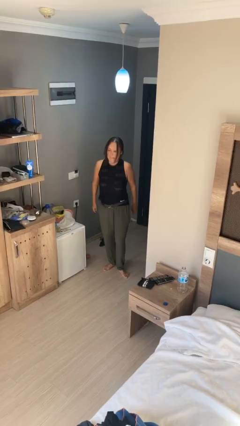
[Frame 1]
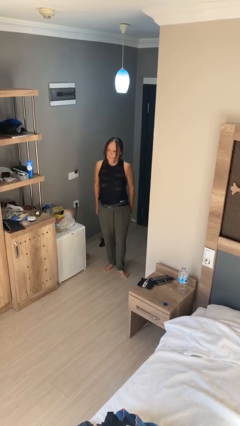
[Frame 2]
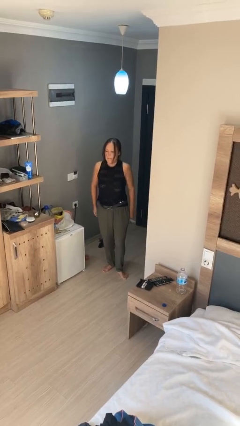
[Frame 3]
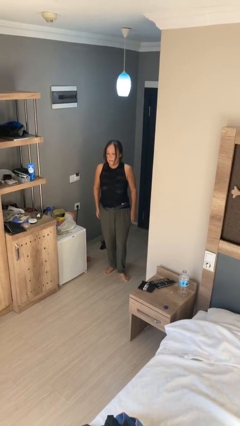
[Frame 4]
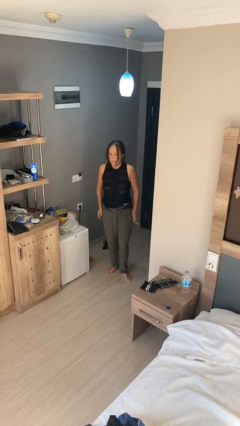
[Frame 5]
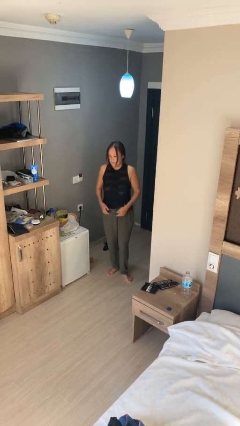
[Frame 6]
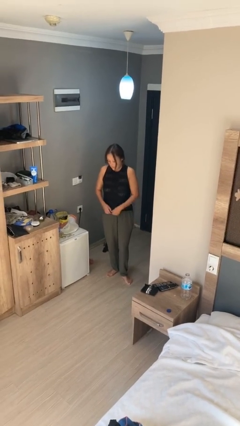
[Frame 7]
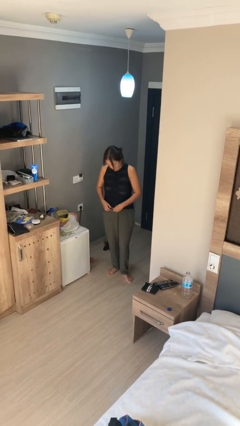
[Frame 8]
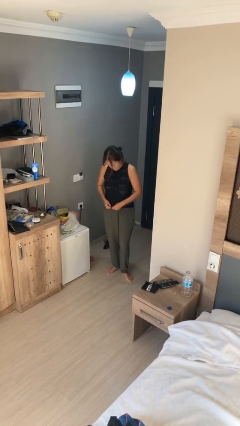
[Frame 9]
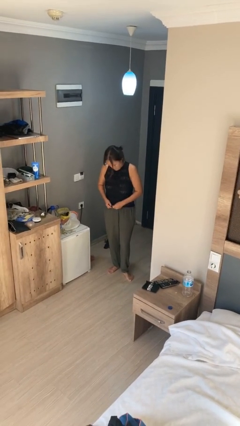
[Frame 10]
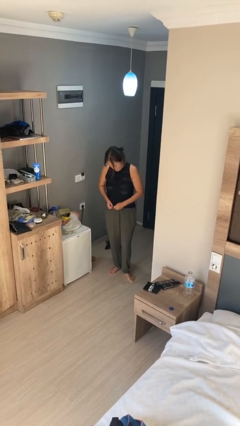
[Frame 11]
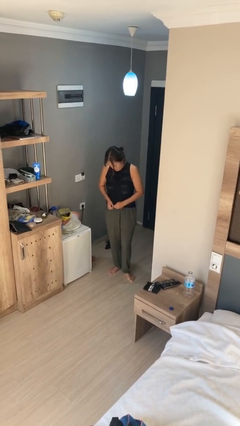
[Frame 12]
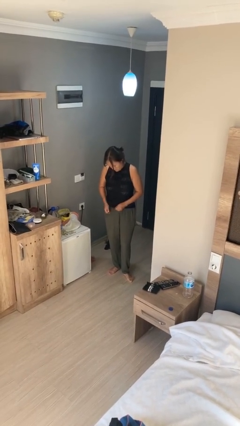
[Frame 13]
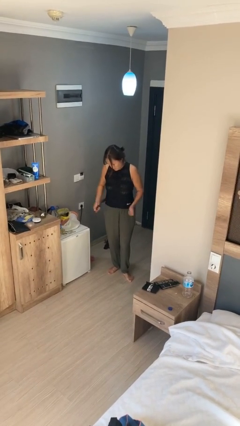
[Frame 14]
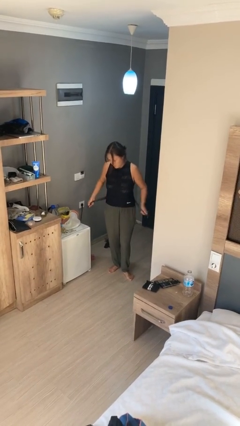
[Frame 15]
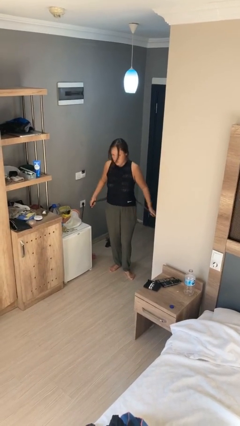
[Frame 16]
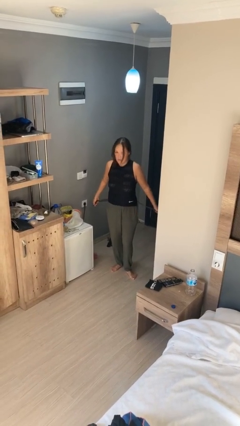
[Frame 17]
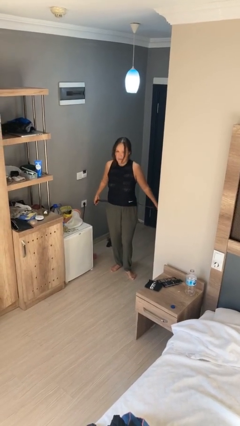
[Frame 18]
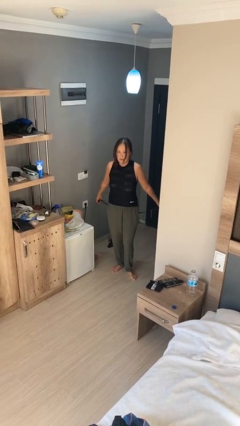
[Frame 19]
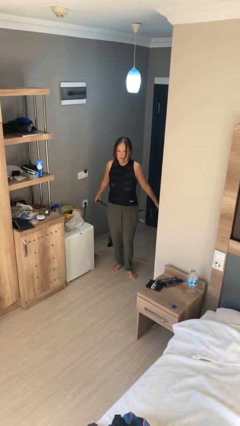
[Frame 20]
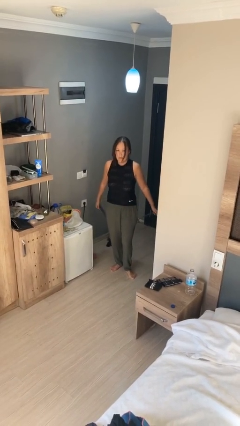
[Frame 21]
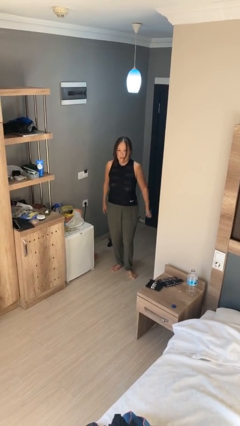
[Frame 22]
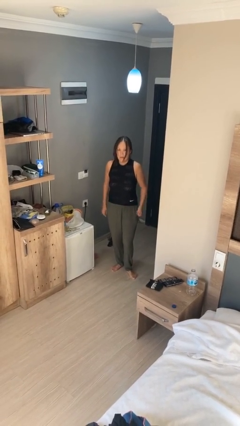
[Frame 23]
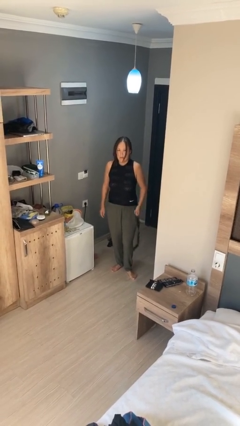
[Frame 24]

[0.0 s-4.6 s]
person takes off belt

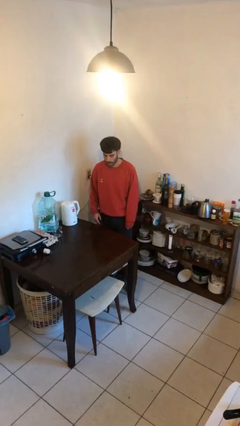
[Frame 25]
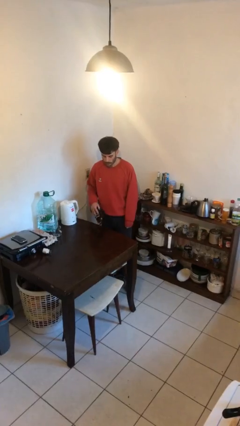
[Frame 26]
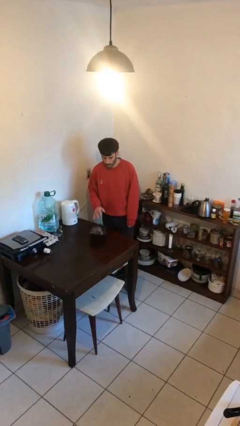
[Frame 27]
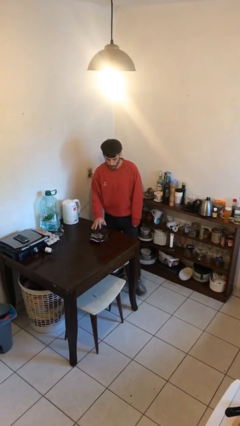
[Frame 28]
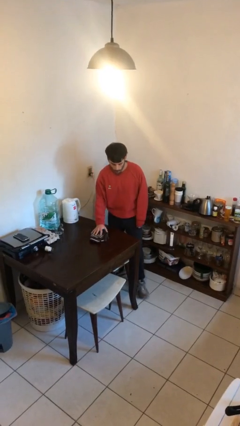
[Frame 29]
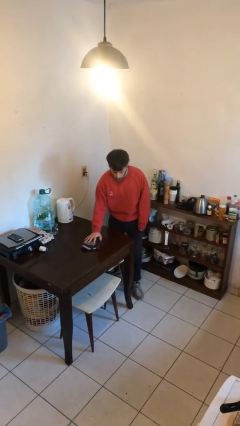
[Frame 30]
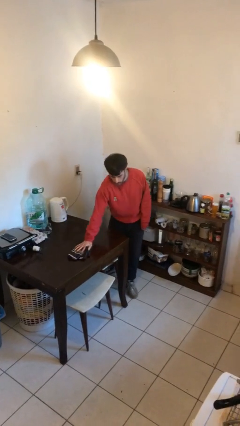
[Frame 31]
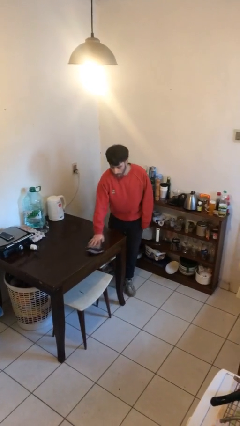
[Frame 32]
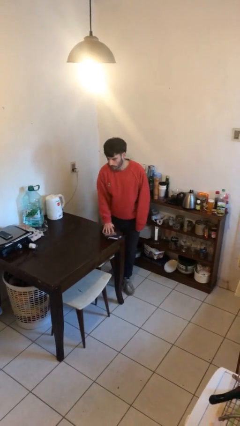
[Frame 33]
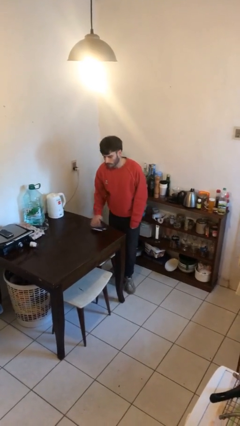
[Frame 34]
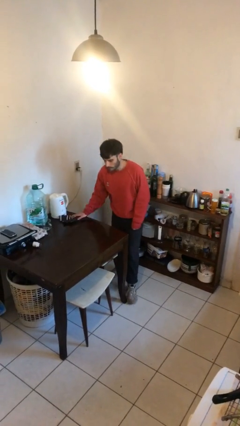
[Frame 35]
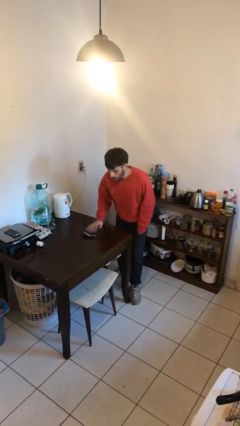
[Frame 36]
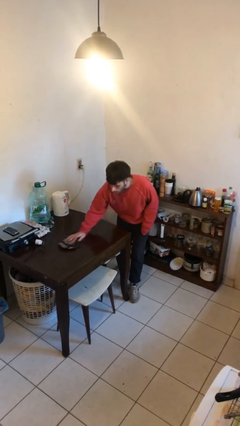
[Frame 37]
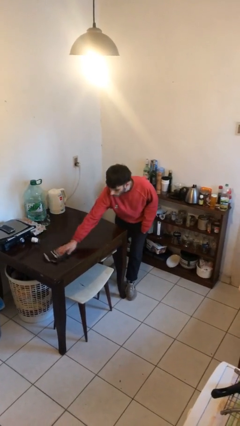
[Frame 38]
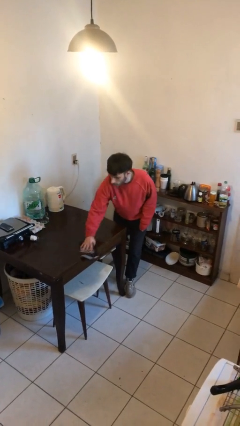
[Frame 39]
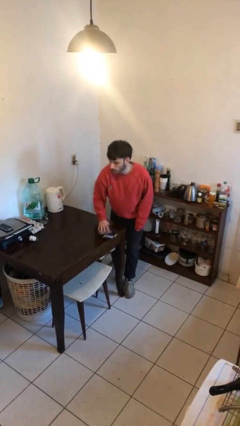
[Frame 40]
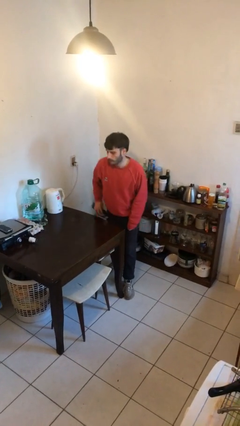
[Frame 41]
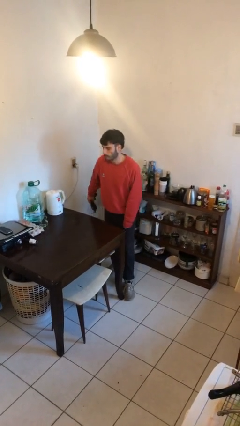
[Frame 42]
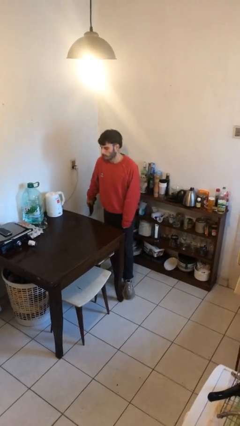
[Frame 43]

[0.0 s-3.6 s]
person cleans table with rag

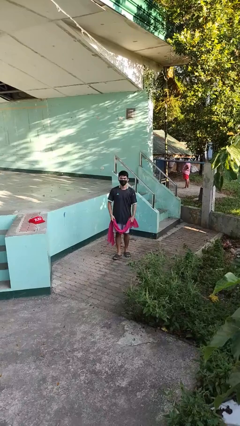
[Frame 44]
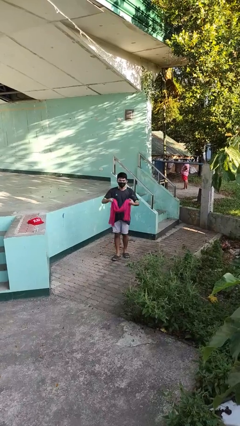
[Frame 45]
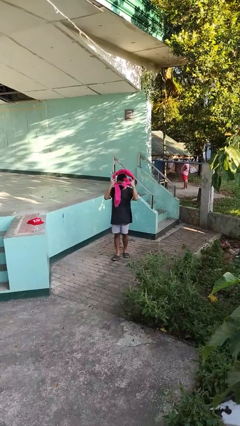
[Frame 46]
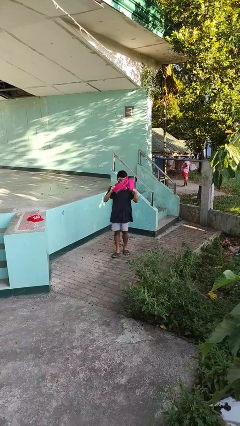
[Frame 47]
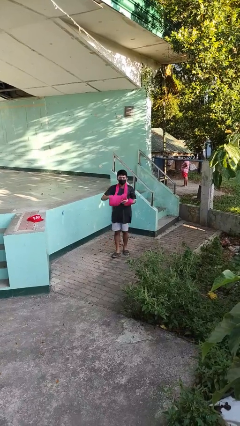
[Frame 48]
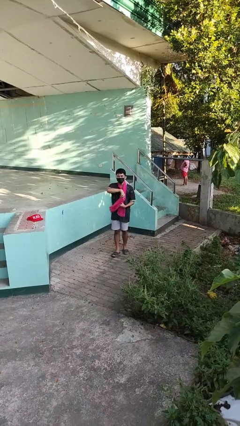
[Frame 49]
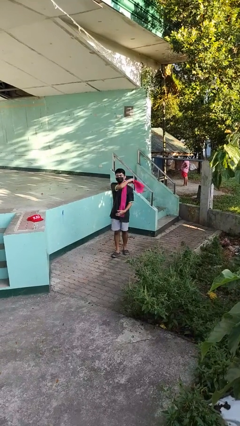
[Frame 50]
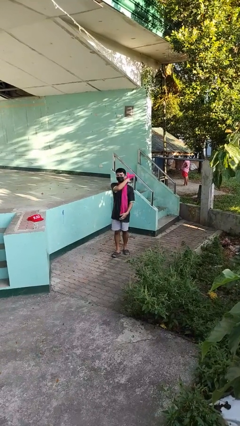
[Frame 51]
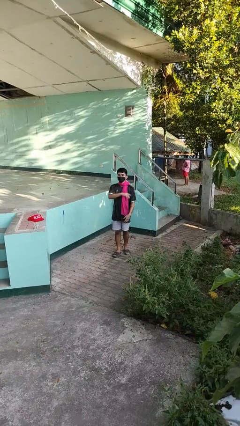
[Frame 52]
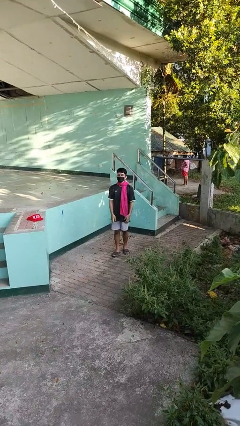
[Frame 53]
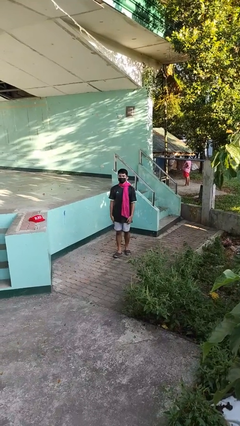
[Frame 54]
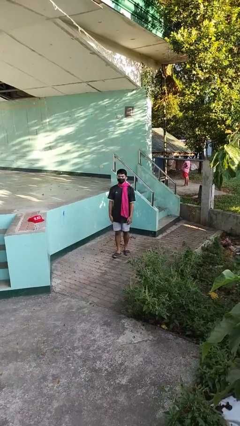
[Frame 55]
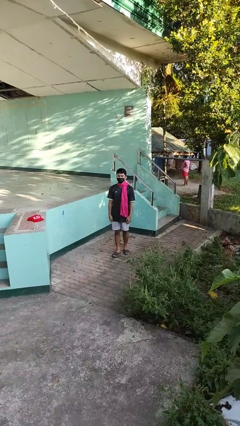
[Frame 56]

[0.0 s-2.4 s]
person puts on scarf

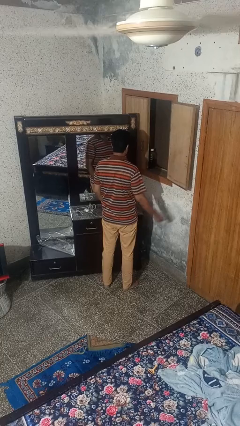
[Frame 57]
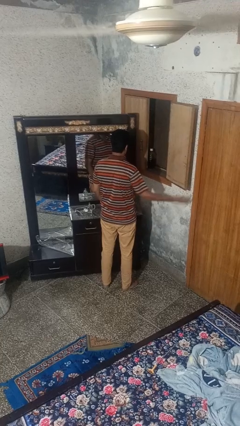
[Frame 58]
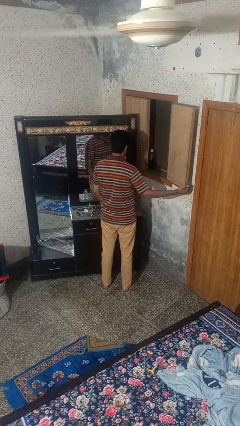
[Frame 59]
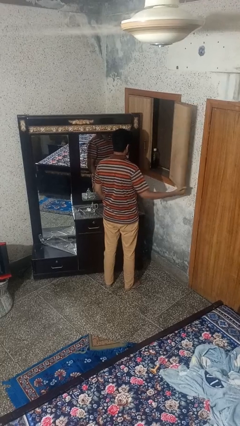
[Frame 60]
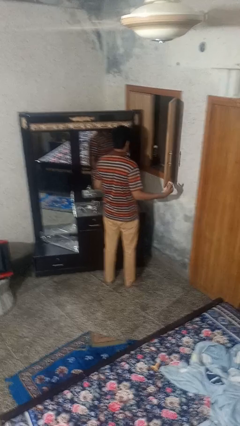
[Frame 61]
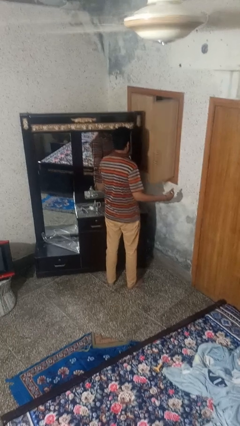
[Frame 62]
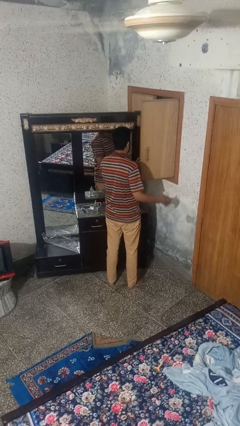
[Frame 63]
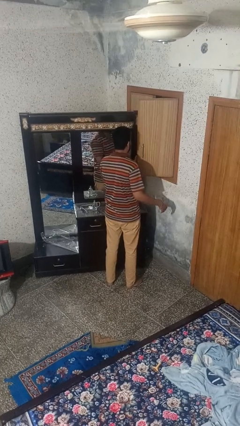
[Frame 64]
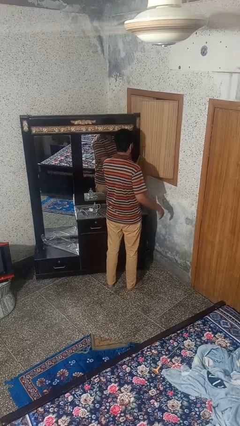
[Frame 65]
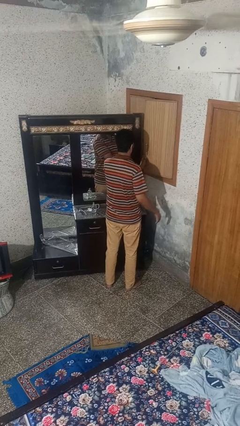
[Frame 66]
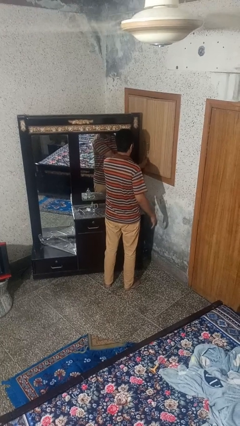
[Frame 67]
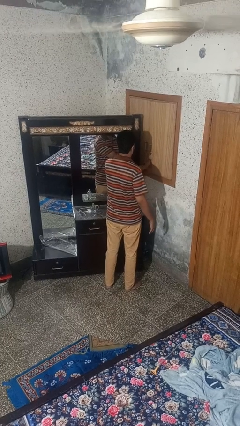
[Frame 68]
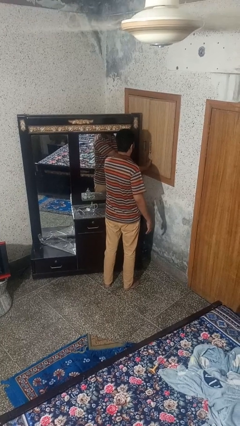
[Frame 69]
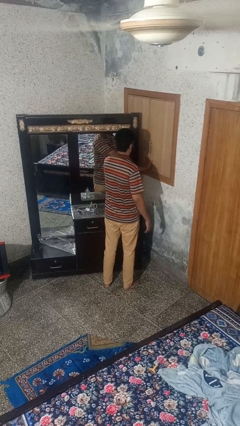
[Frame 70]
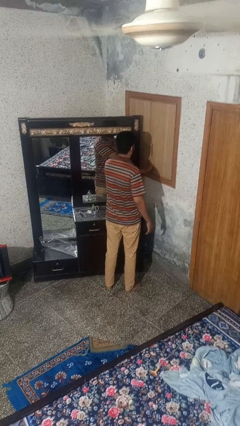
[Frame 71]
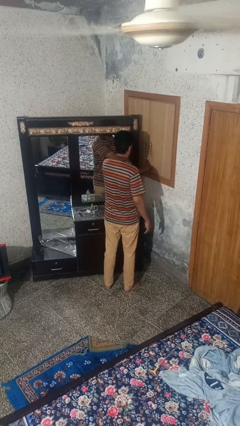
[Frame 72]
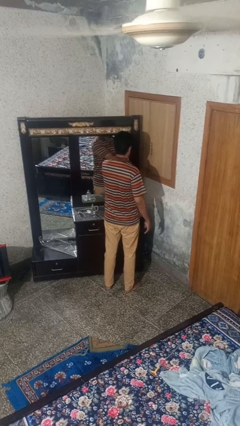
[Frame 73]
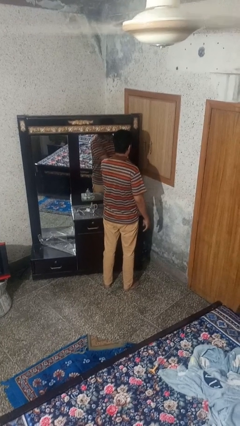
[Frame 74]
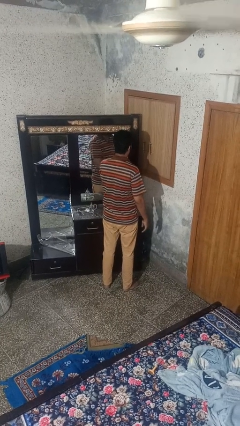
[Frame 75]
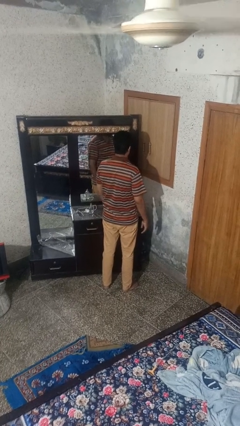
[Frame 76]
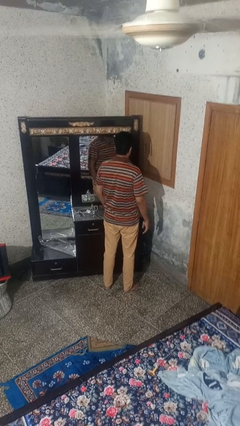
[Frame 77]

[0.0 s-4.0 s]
person closes home window

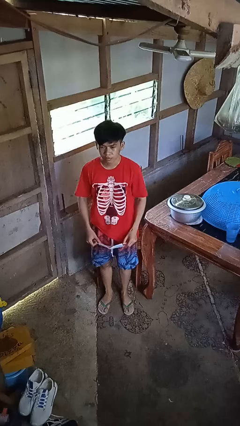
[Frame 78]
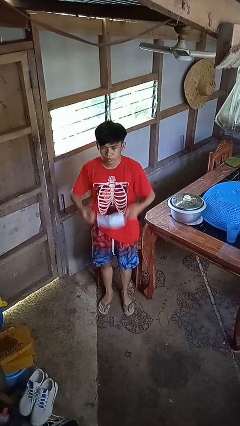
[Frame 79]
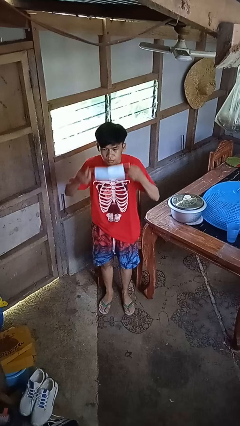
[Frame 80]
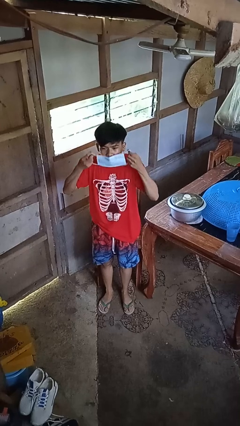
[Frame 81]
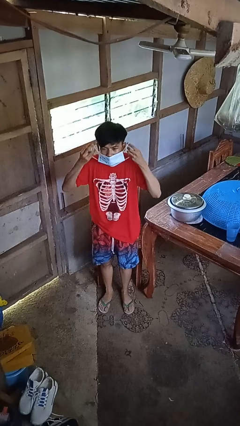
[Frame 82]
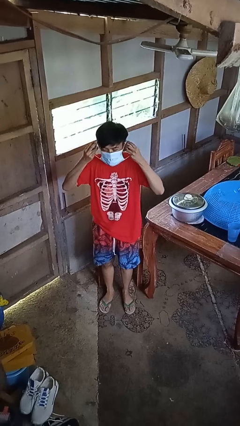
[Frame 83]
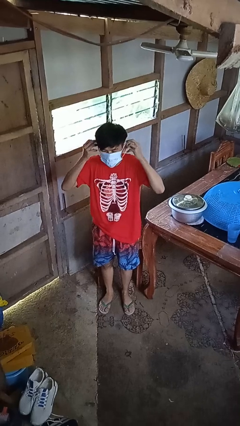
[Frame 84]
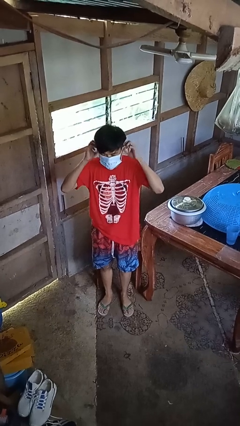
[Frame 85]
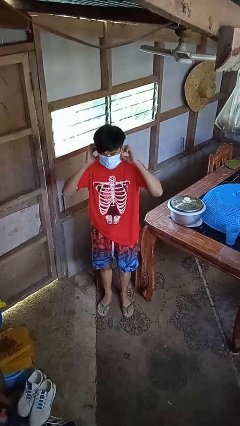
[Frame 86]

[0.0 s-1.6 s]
person puts on facemask

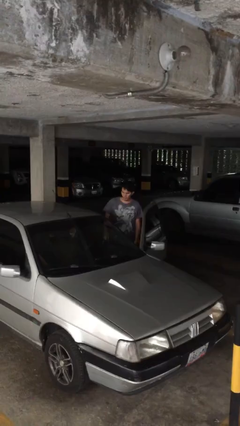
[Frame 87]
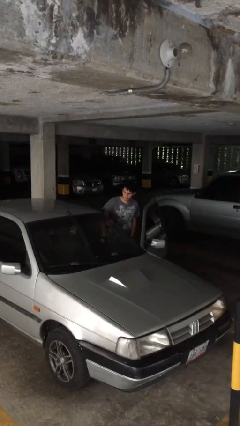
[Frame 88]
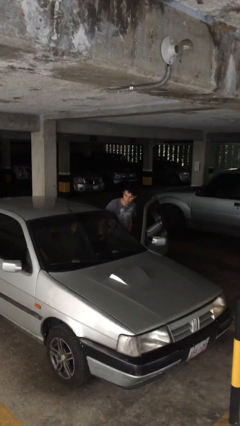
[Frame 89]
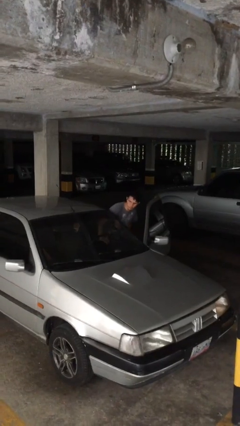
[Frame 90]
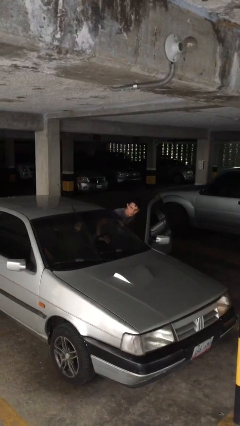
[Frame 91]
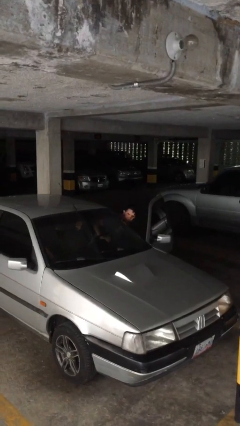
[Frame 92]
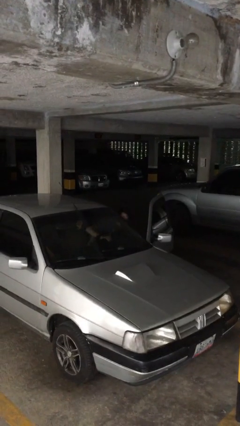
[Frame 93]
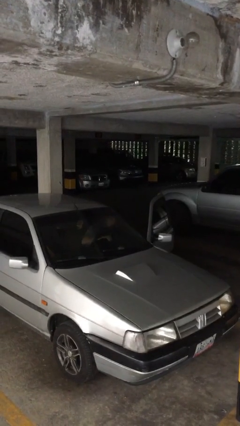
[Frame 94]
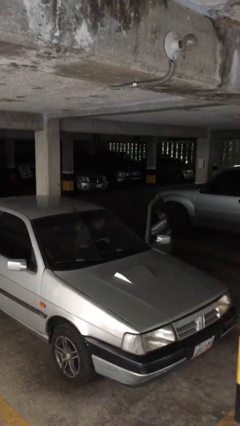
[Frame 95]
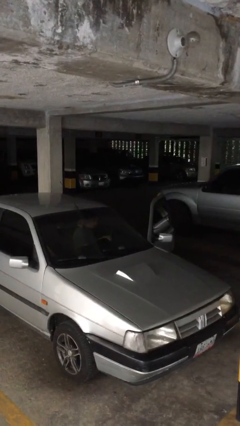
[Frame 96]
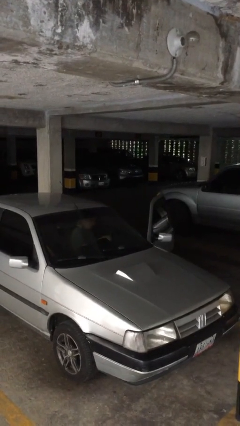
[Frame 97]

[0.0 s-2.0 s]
person enters car
